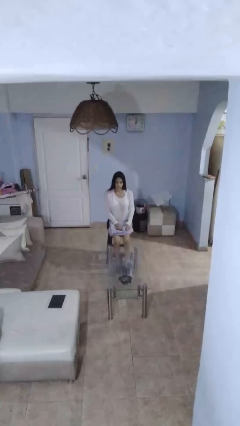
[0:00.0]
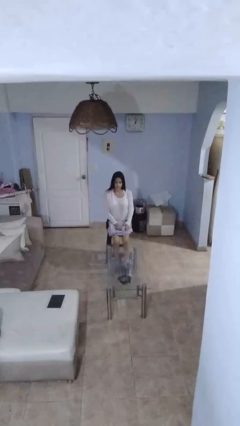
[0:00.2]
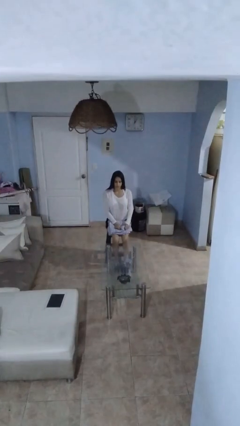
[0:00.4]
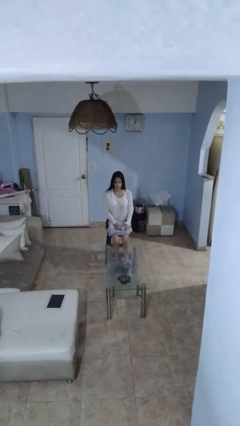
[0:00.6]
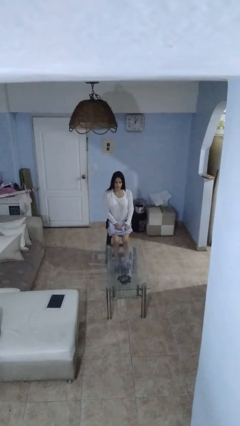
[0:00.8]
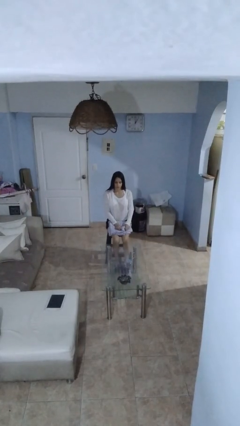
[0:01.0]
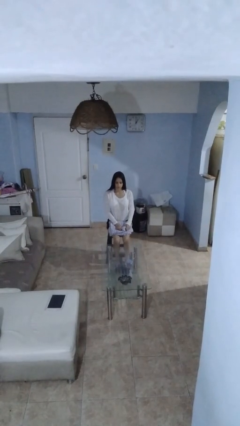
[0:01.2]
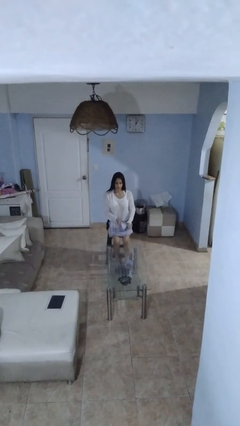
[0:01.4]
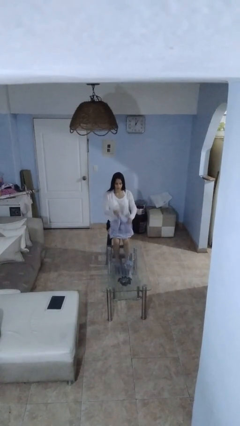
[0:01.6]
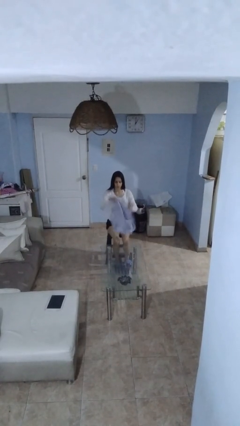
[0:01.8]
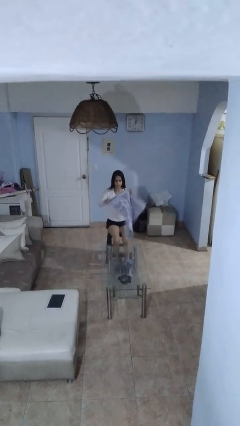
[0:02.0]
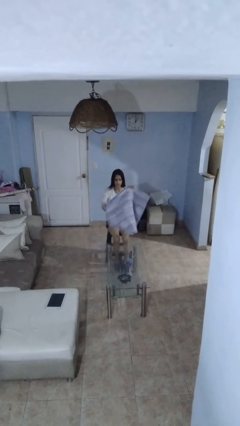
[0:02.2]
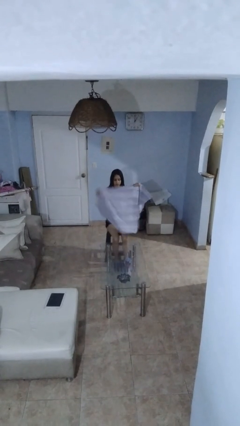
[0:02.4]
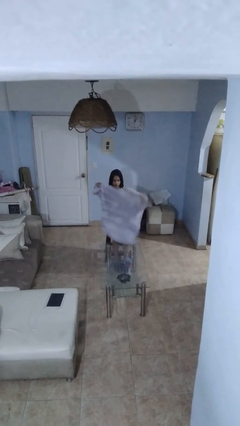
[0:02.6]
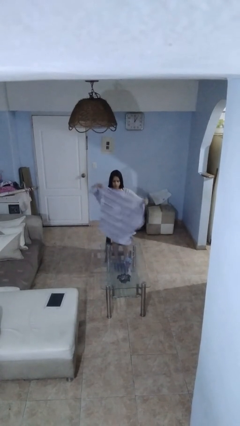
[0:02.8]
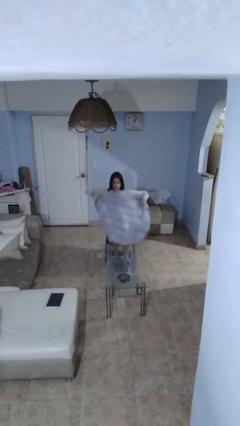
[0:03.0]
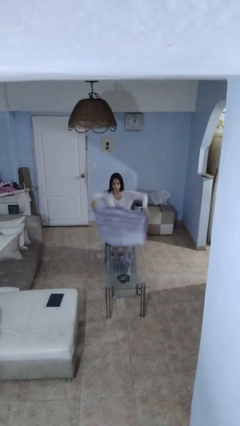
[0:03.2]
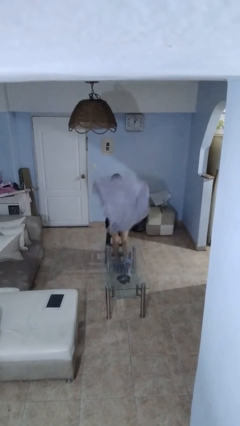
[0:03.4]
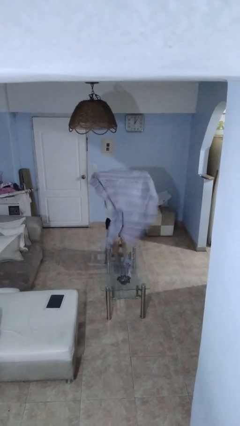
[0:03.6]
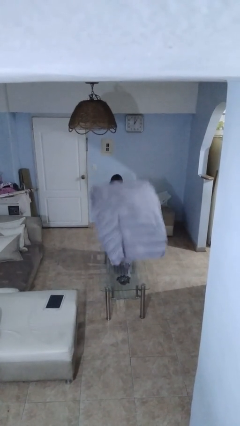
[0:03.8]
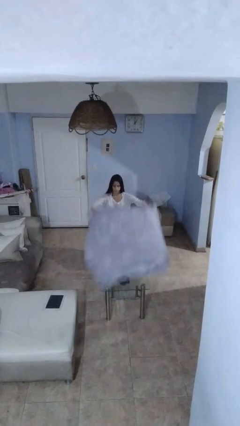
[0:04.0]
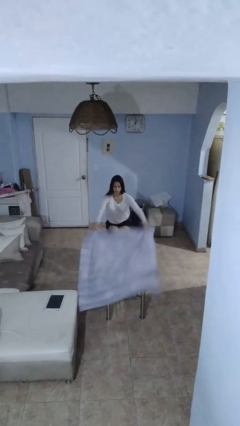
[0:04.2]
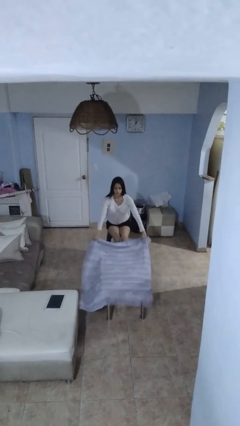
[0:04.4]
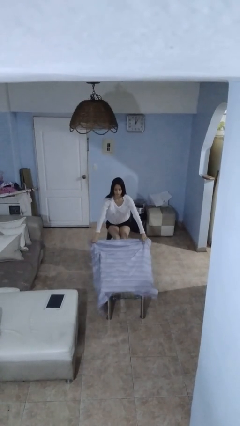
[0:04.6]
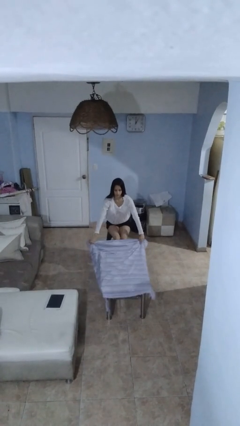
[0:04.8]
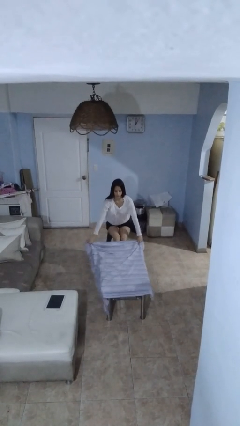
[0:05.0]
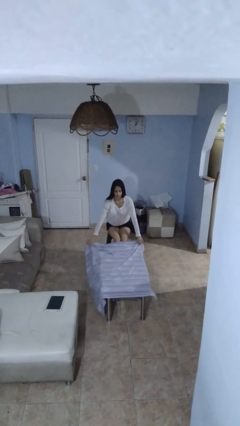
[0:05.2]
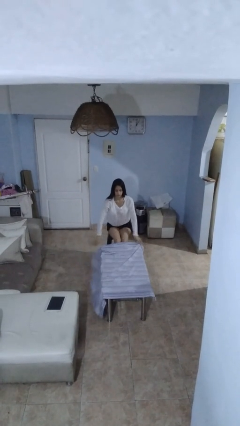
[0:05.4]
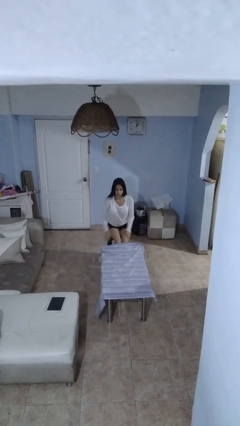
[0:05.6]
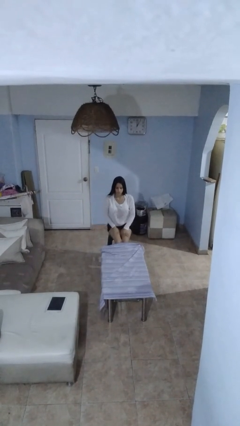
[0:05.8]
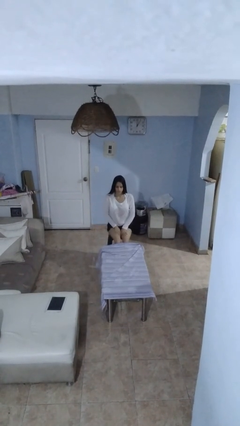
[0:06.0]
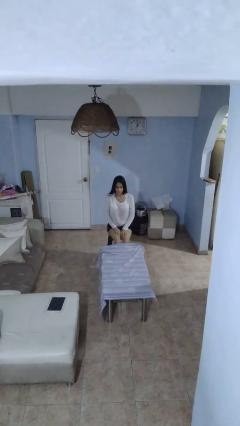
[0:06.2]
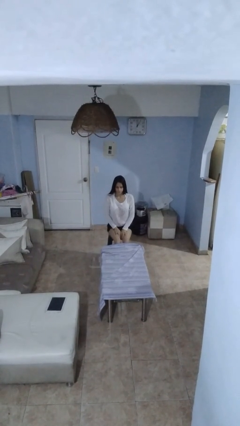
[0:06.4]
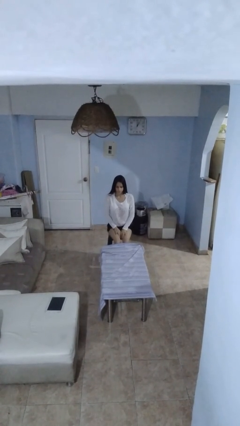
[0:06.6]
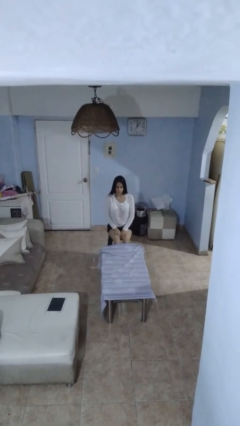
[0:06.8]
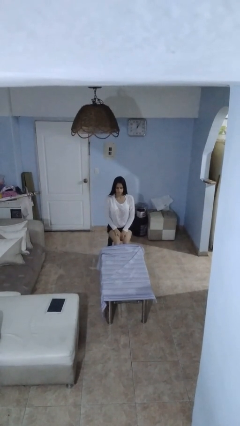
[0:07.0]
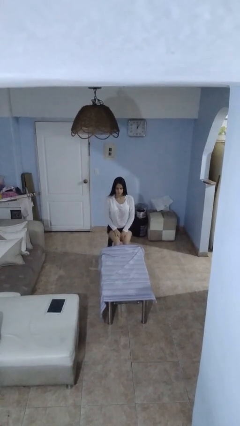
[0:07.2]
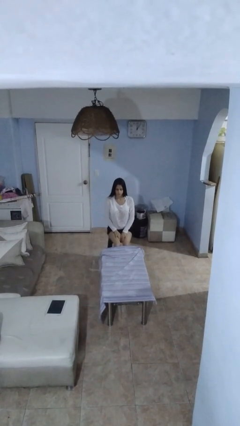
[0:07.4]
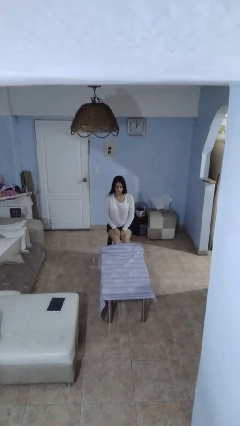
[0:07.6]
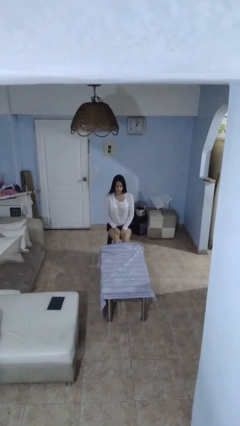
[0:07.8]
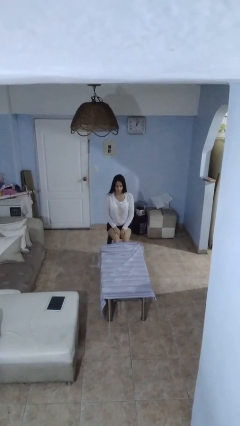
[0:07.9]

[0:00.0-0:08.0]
person spreads tablecloth

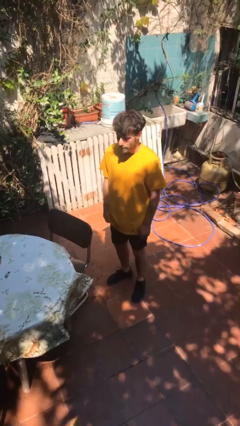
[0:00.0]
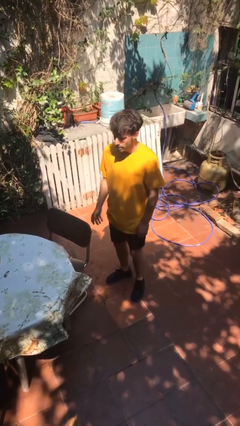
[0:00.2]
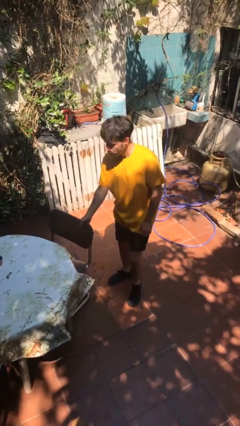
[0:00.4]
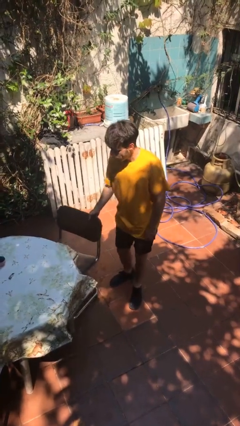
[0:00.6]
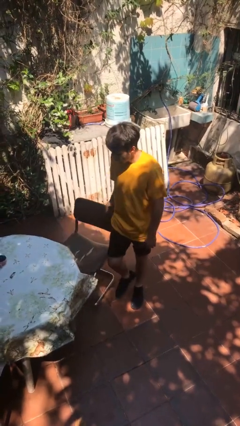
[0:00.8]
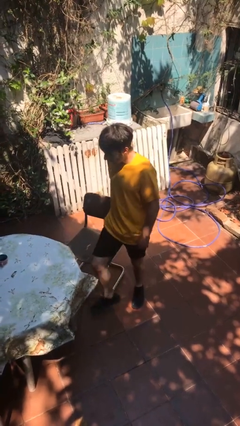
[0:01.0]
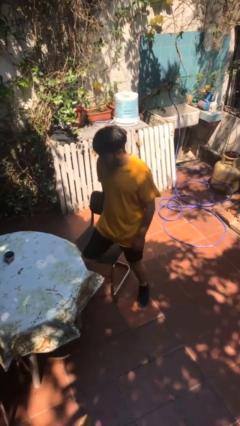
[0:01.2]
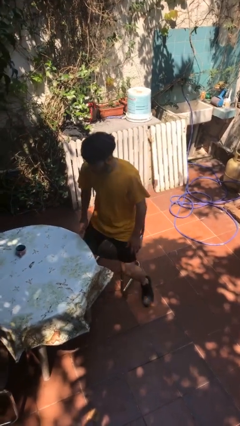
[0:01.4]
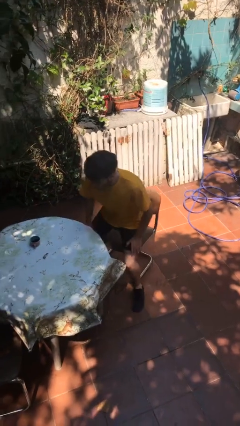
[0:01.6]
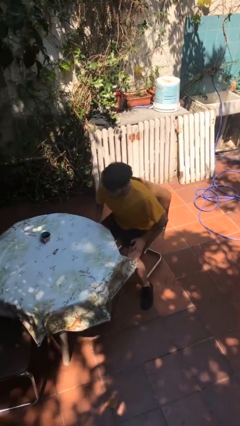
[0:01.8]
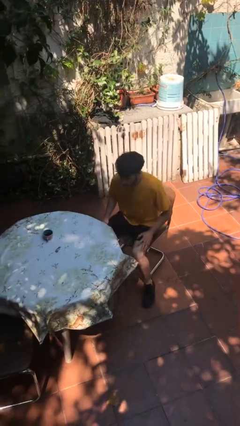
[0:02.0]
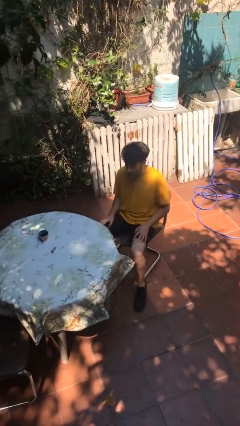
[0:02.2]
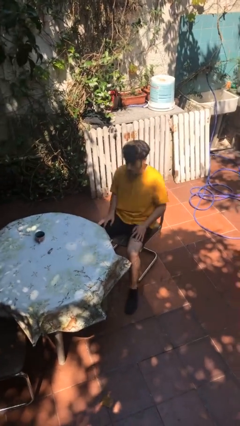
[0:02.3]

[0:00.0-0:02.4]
person sits down

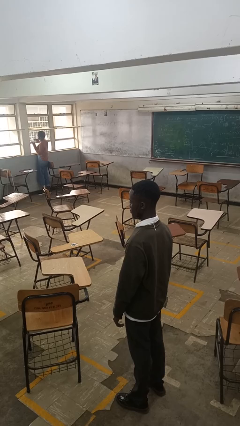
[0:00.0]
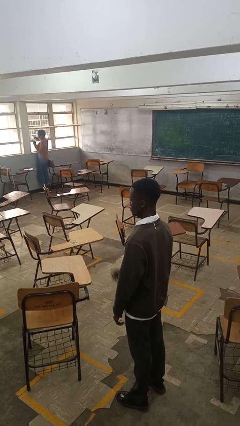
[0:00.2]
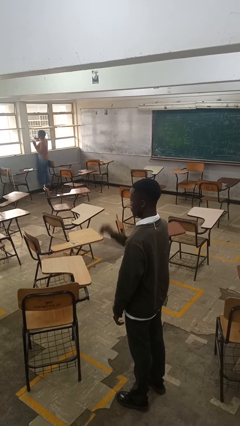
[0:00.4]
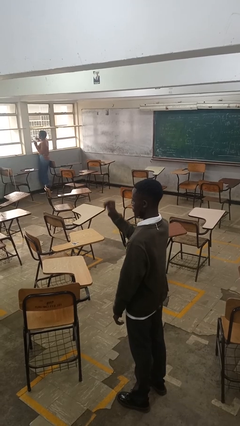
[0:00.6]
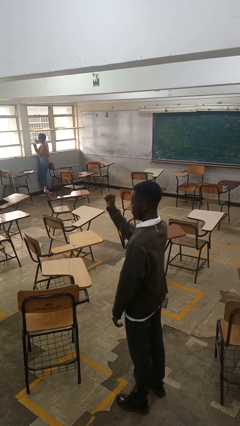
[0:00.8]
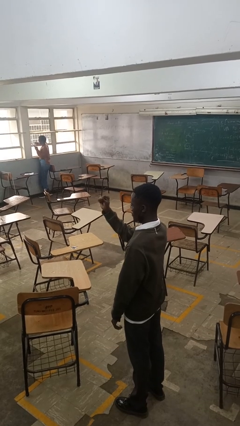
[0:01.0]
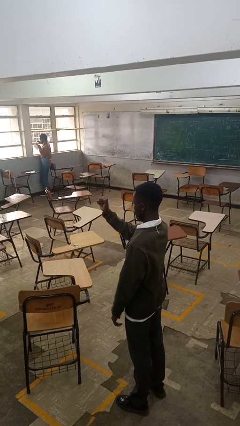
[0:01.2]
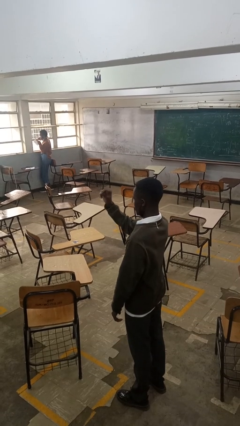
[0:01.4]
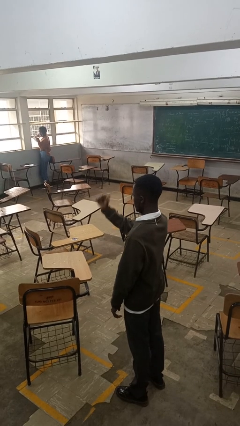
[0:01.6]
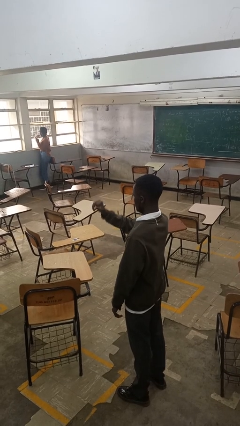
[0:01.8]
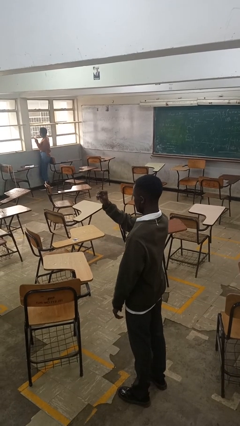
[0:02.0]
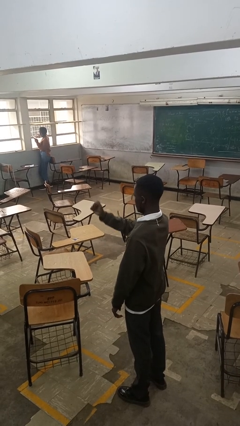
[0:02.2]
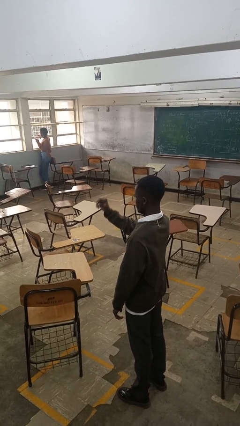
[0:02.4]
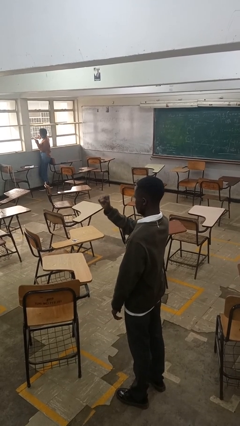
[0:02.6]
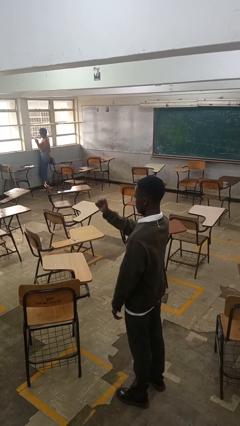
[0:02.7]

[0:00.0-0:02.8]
person snaps fingers

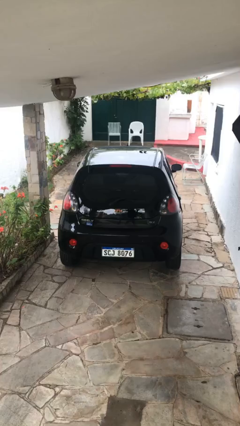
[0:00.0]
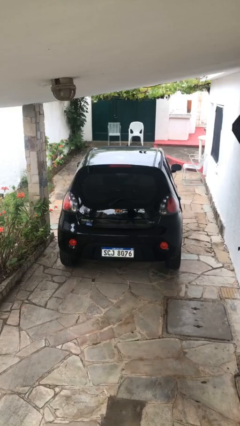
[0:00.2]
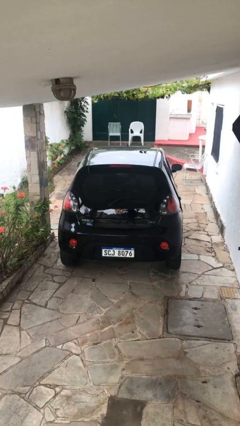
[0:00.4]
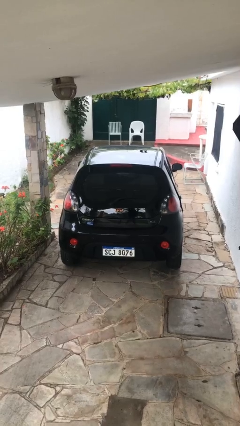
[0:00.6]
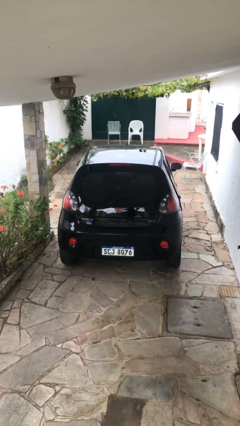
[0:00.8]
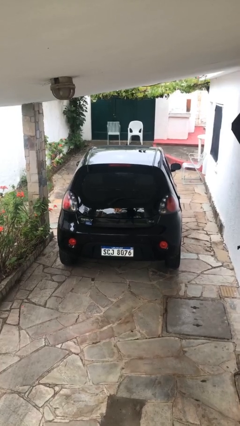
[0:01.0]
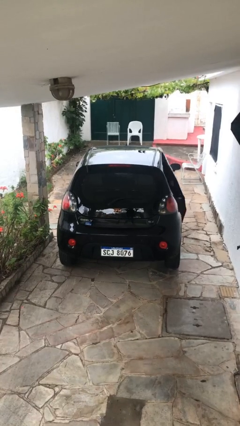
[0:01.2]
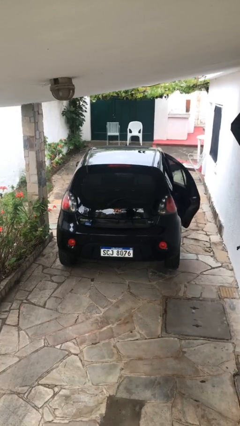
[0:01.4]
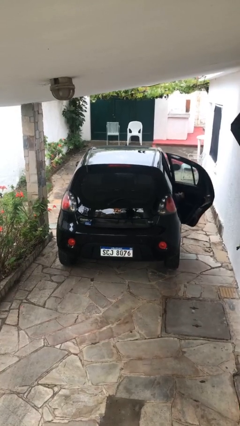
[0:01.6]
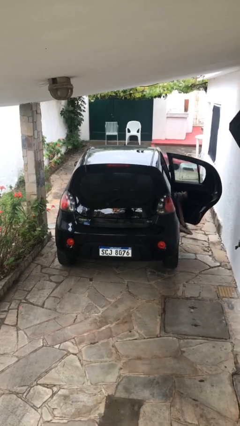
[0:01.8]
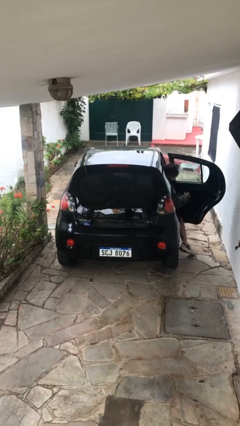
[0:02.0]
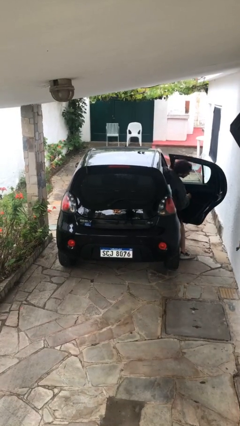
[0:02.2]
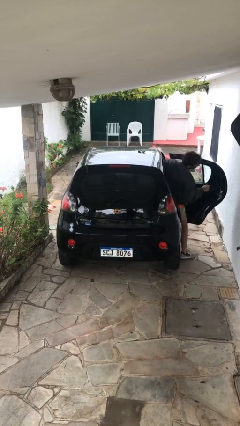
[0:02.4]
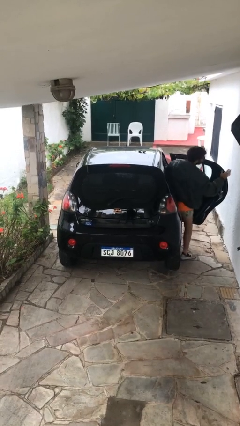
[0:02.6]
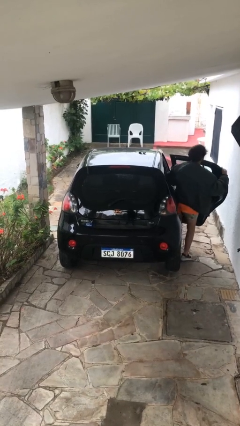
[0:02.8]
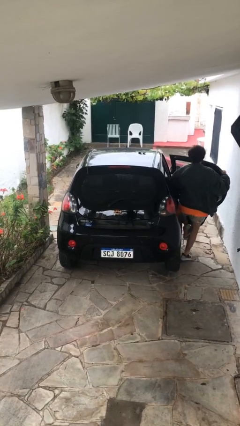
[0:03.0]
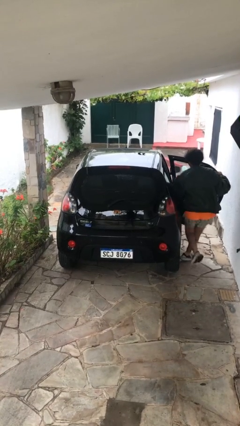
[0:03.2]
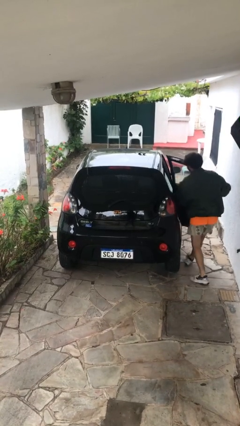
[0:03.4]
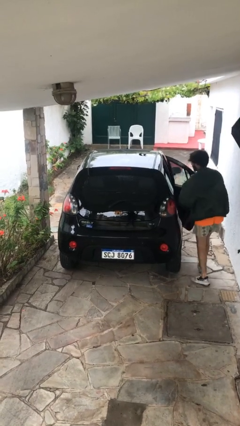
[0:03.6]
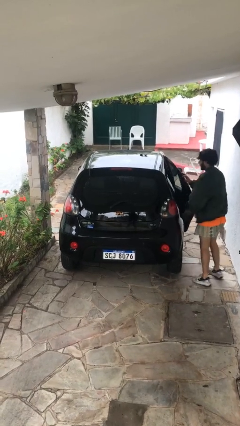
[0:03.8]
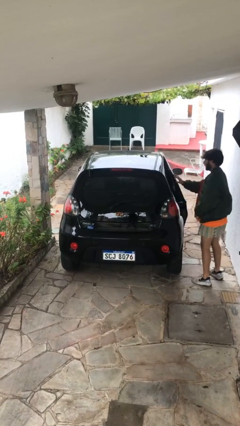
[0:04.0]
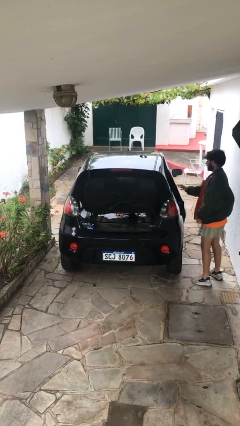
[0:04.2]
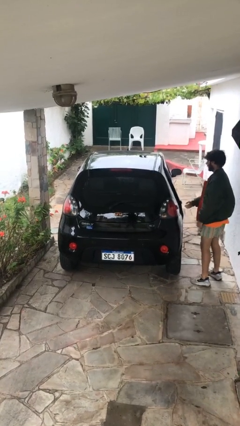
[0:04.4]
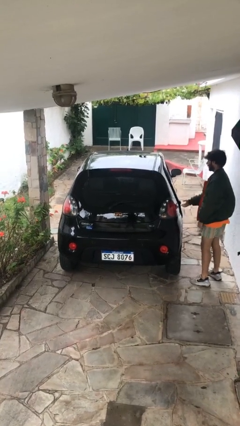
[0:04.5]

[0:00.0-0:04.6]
car drops off person
